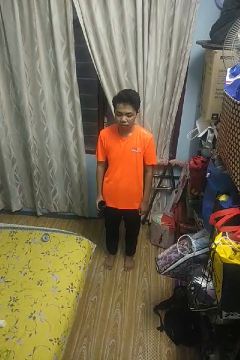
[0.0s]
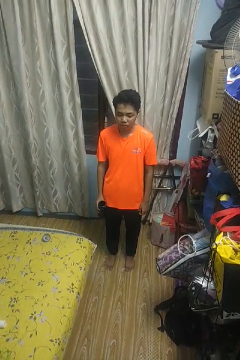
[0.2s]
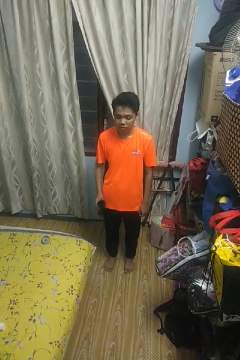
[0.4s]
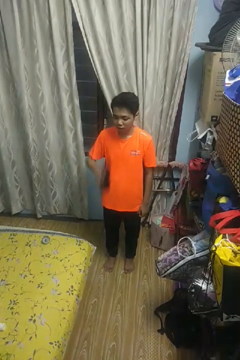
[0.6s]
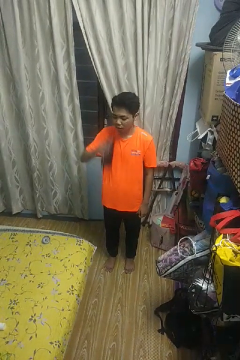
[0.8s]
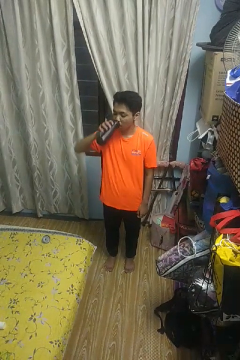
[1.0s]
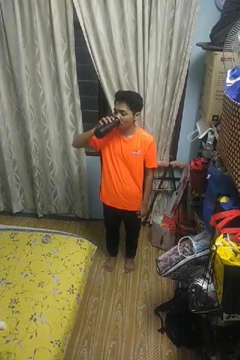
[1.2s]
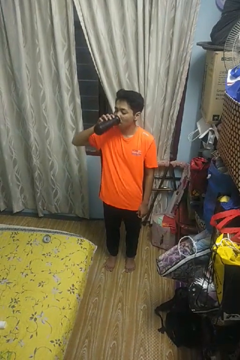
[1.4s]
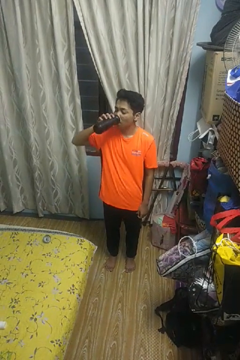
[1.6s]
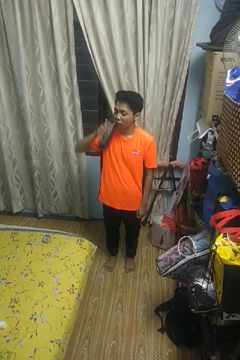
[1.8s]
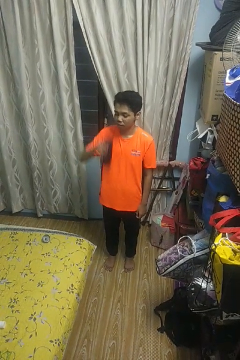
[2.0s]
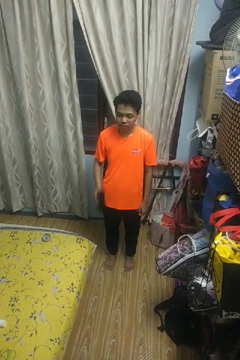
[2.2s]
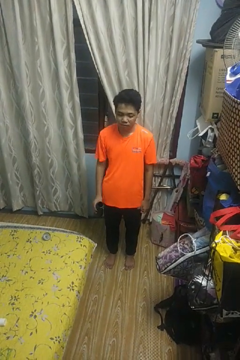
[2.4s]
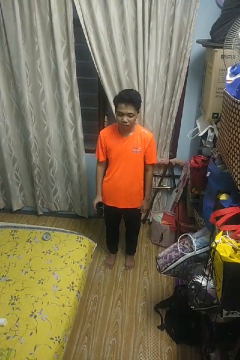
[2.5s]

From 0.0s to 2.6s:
person drinks from bottle

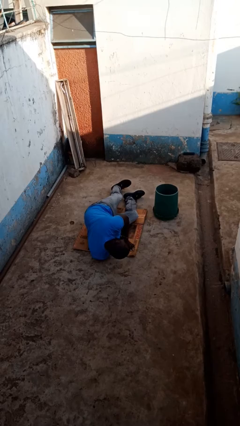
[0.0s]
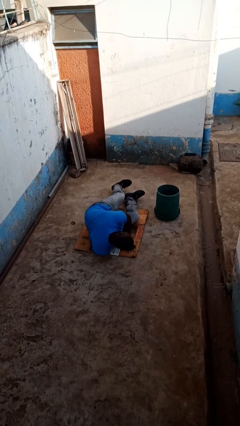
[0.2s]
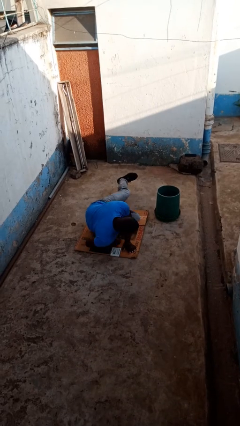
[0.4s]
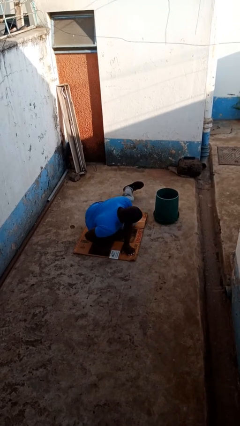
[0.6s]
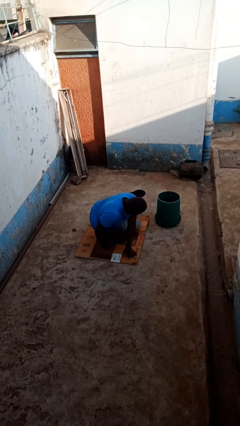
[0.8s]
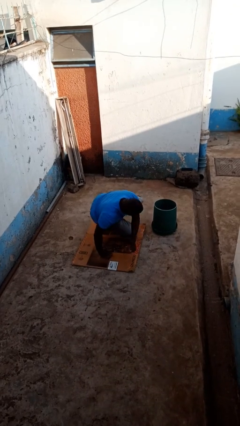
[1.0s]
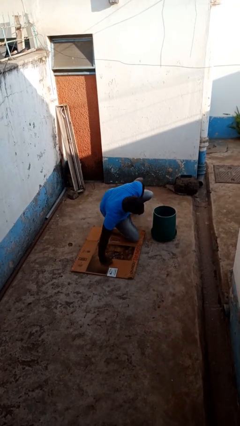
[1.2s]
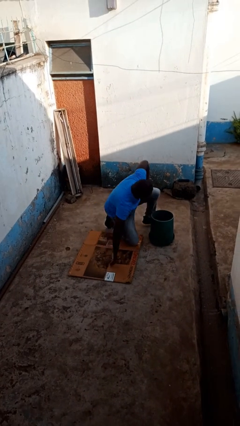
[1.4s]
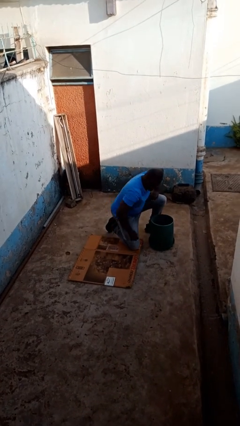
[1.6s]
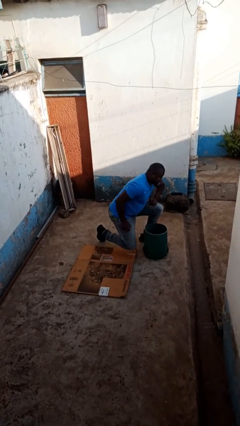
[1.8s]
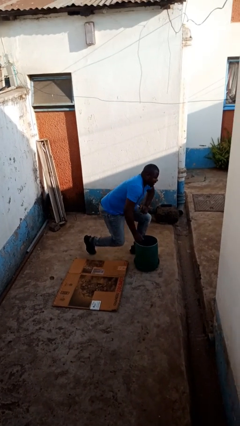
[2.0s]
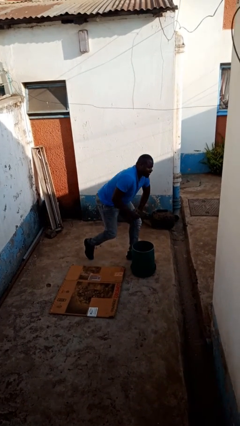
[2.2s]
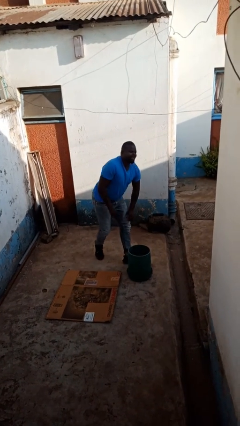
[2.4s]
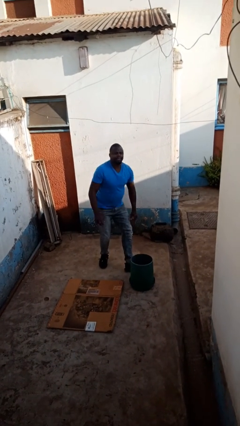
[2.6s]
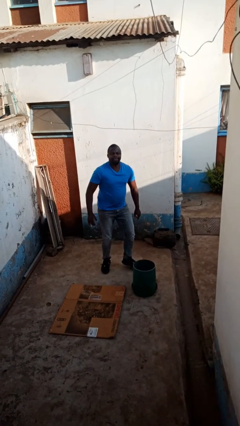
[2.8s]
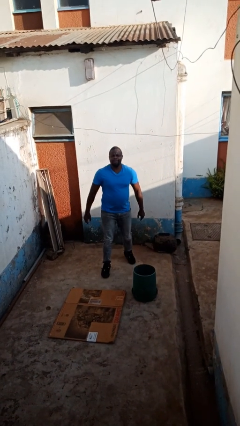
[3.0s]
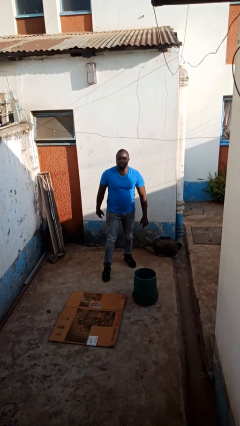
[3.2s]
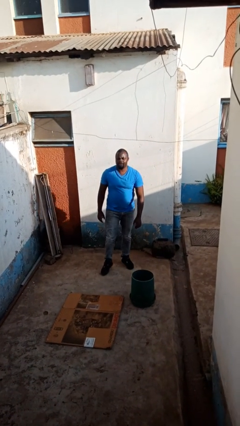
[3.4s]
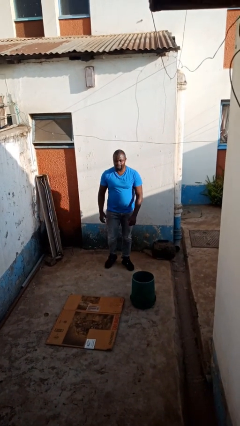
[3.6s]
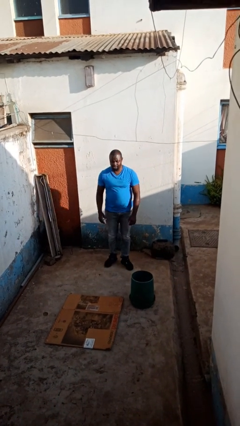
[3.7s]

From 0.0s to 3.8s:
person stands up from floor

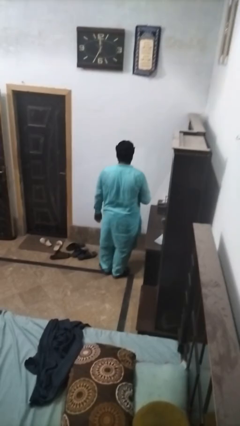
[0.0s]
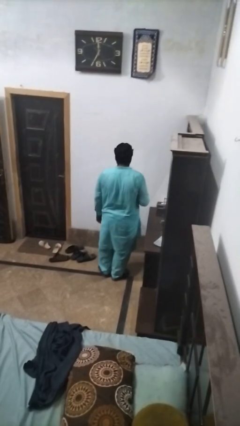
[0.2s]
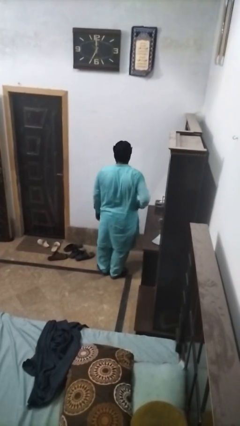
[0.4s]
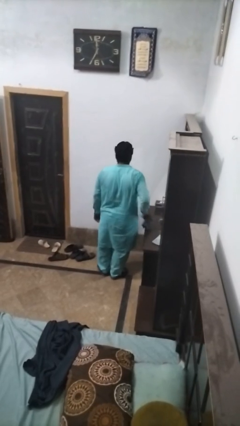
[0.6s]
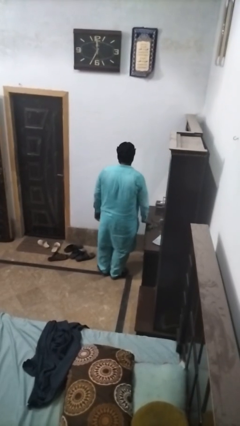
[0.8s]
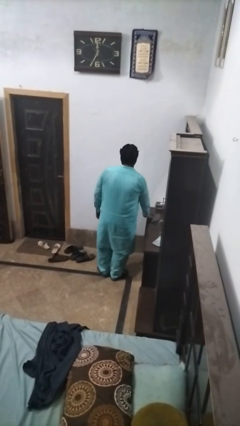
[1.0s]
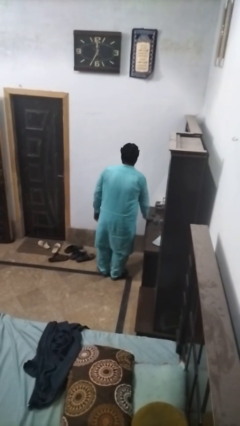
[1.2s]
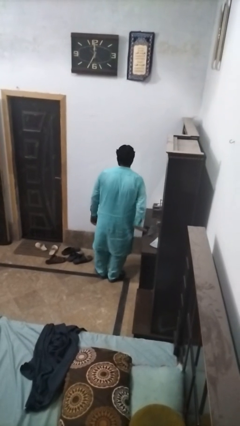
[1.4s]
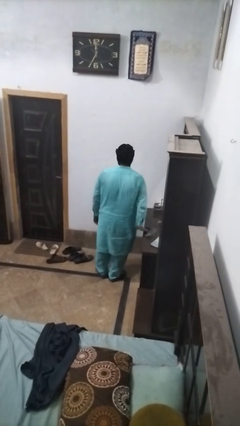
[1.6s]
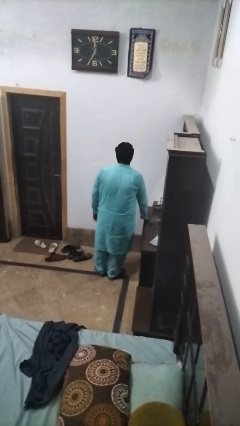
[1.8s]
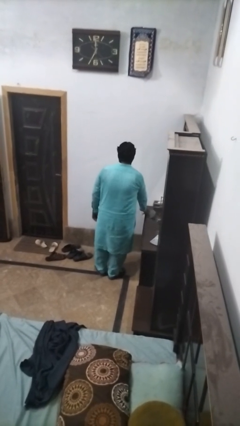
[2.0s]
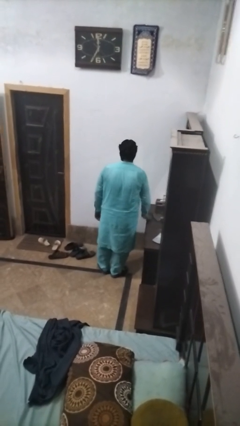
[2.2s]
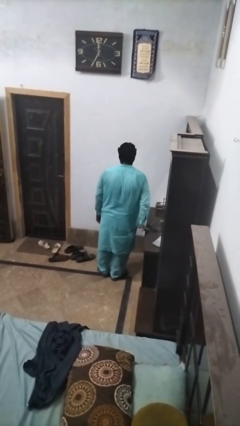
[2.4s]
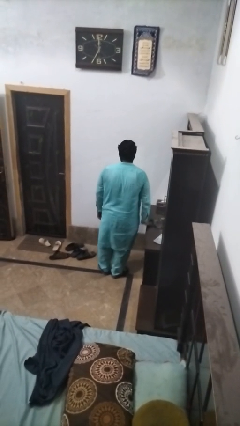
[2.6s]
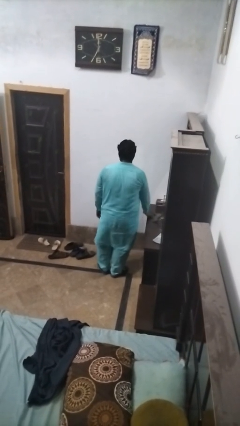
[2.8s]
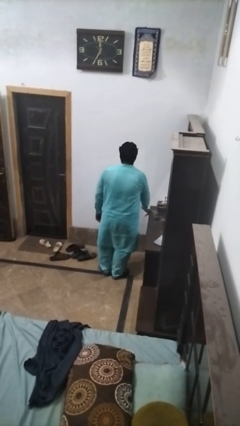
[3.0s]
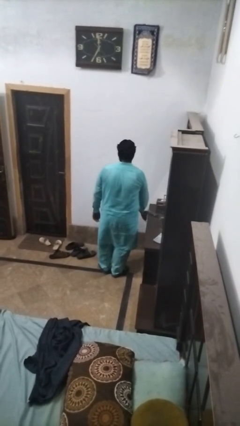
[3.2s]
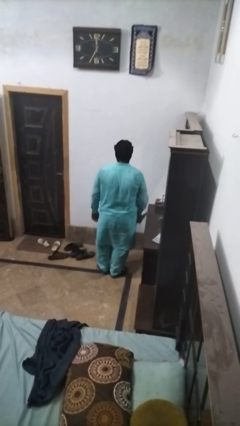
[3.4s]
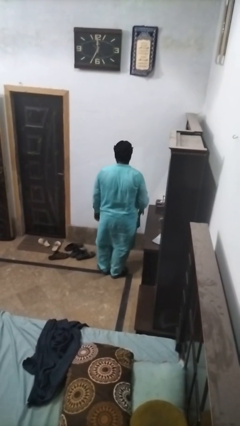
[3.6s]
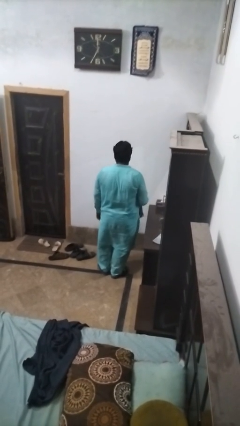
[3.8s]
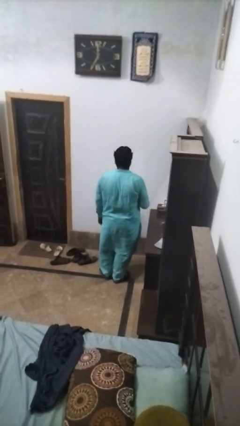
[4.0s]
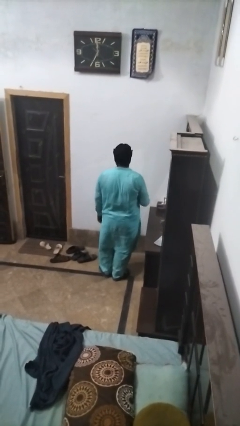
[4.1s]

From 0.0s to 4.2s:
person cleans table with rag

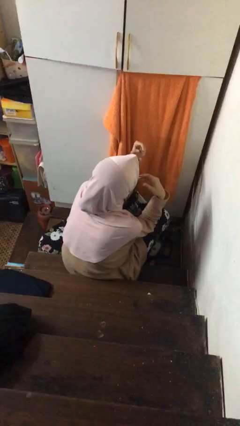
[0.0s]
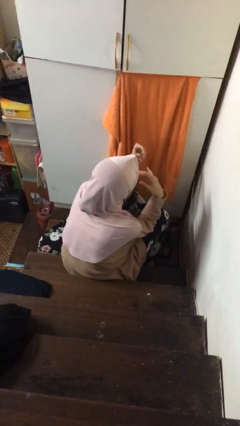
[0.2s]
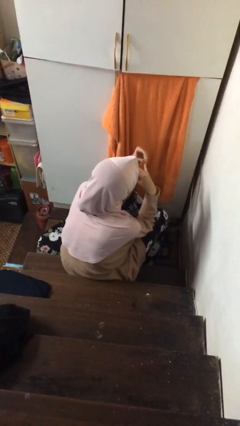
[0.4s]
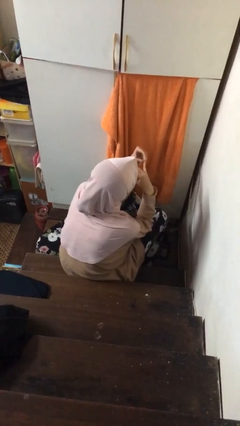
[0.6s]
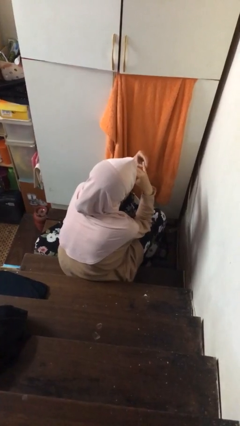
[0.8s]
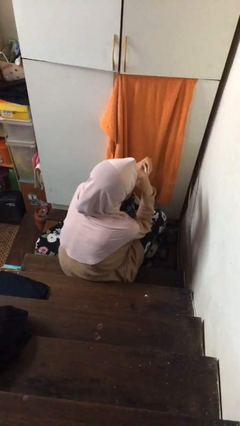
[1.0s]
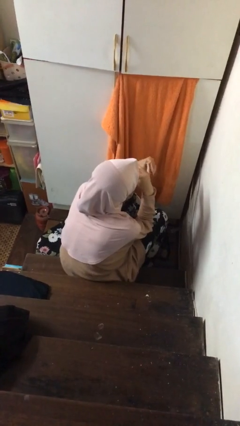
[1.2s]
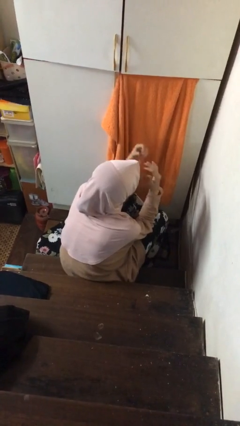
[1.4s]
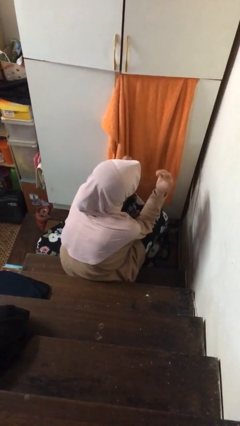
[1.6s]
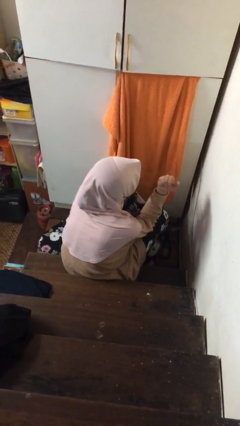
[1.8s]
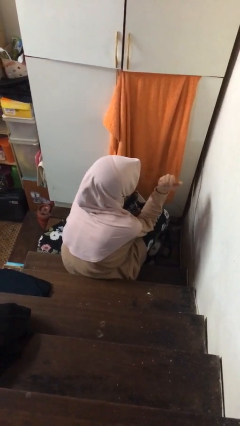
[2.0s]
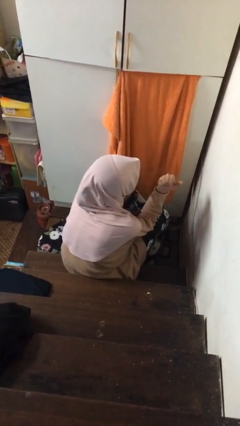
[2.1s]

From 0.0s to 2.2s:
person puts on ring

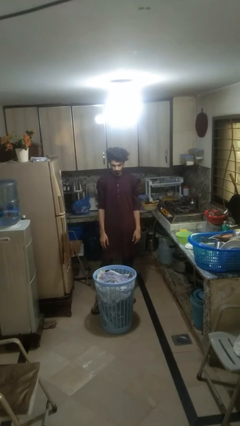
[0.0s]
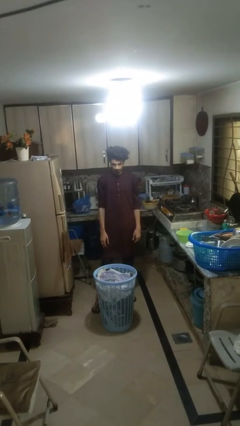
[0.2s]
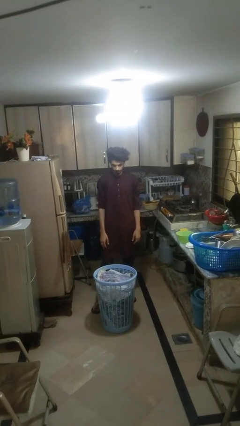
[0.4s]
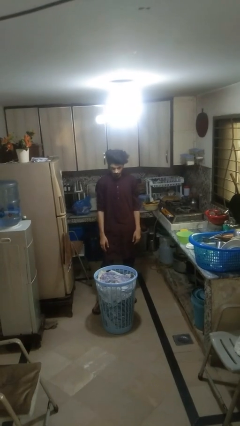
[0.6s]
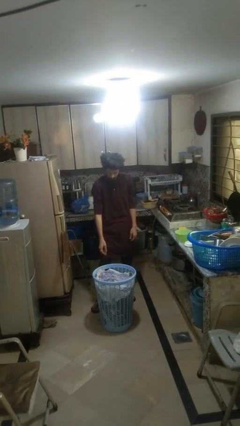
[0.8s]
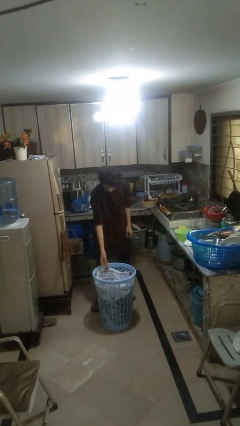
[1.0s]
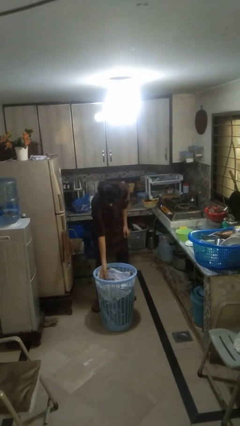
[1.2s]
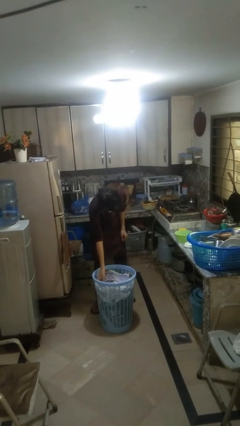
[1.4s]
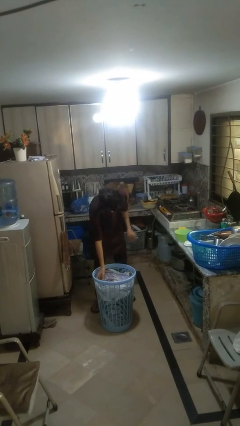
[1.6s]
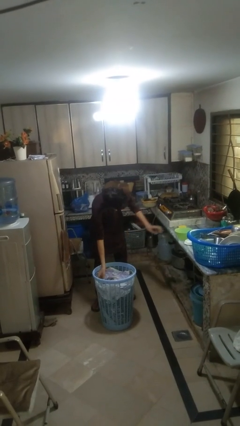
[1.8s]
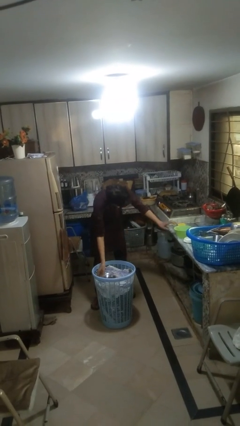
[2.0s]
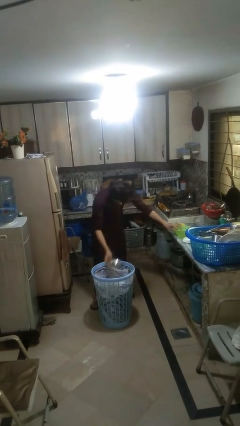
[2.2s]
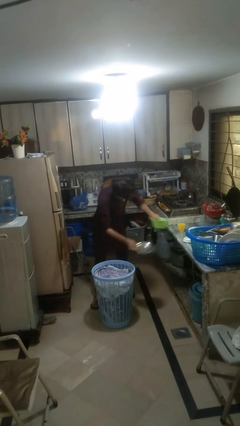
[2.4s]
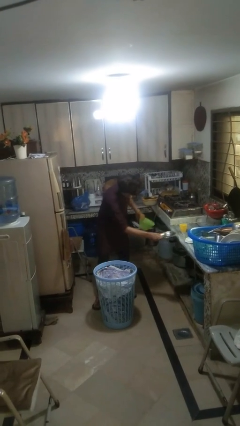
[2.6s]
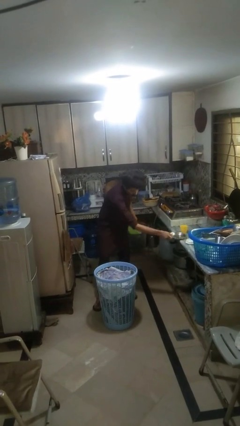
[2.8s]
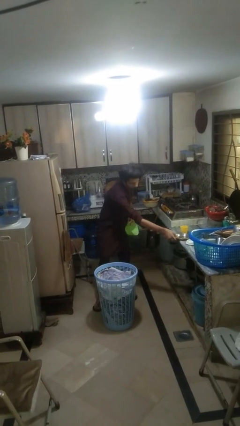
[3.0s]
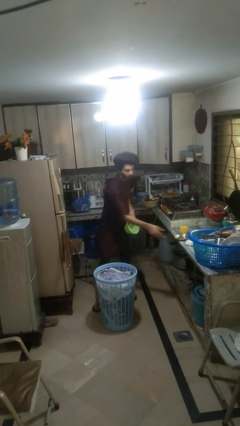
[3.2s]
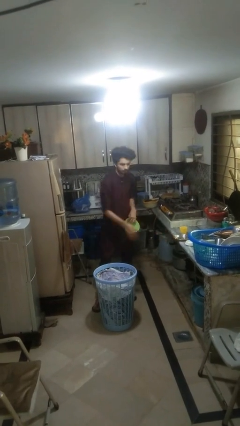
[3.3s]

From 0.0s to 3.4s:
person takes object from basket

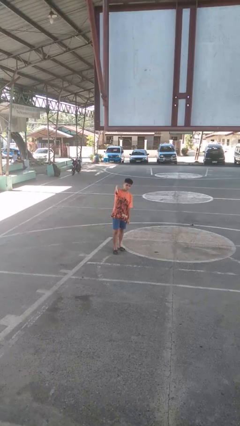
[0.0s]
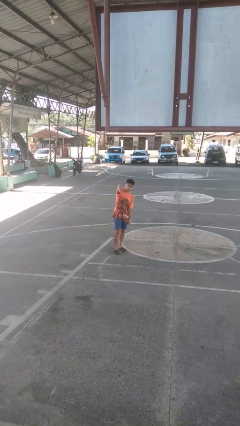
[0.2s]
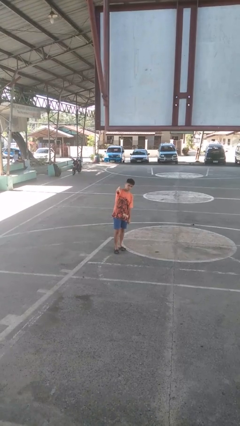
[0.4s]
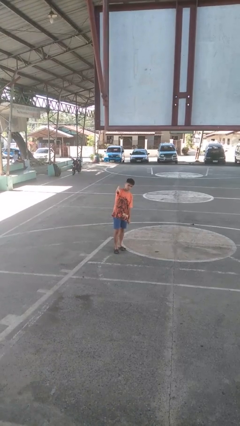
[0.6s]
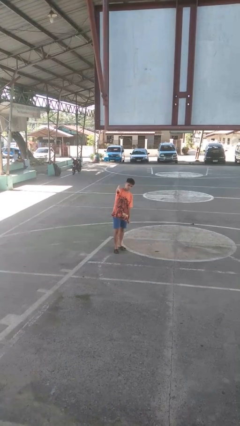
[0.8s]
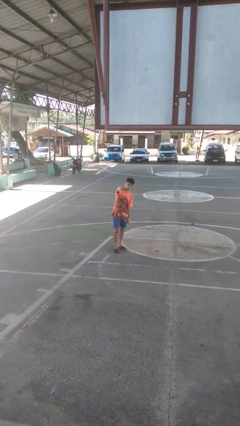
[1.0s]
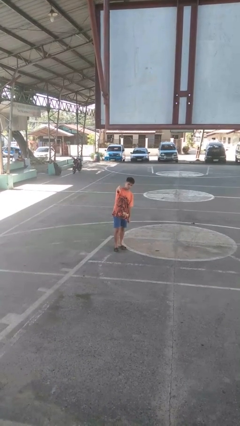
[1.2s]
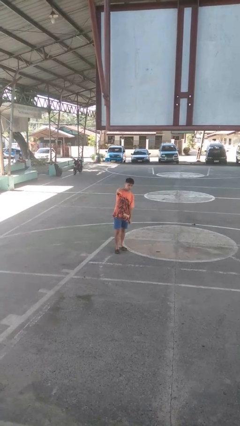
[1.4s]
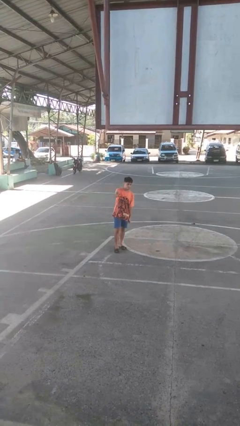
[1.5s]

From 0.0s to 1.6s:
person gestures thumbs down
